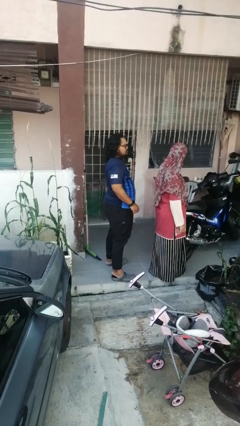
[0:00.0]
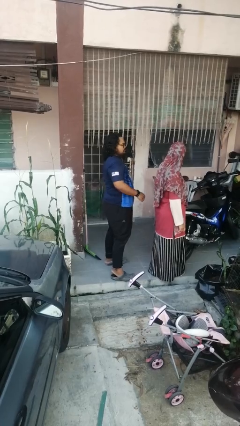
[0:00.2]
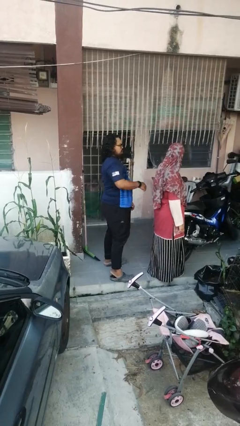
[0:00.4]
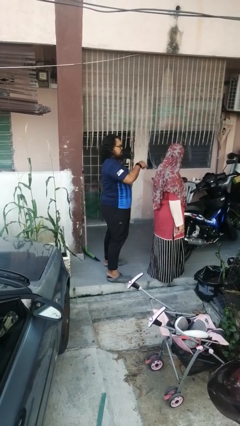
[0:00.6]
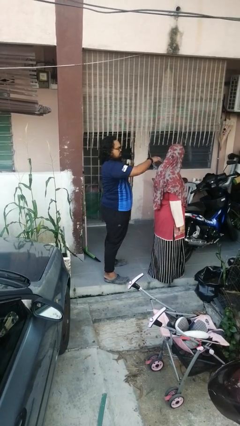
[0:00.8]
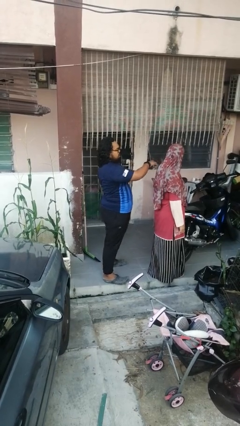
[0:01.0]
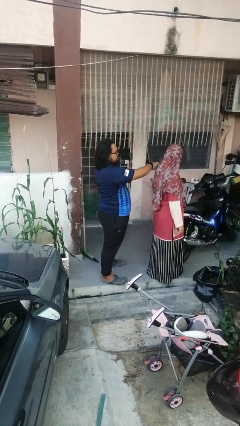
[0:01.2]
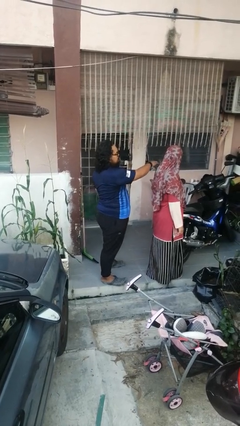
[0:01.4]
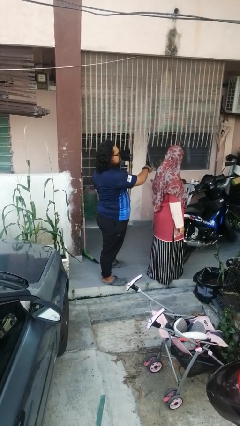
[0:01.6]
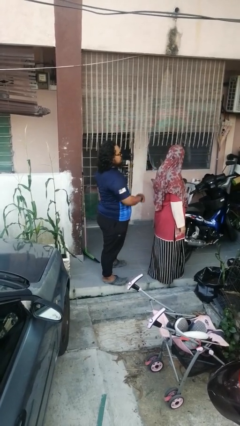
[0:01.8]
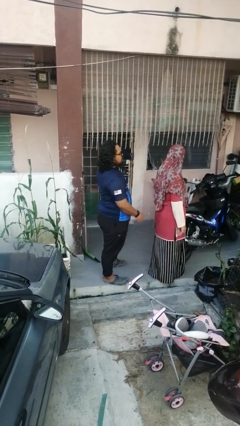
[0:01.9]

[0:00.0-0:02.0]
person touches back of person

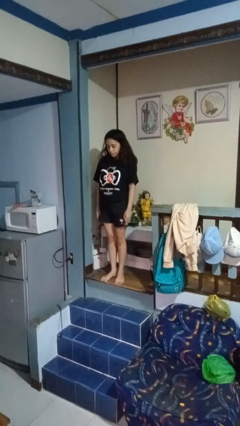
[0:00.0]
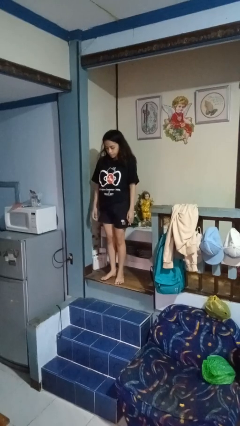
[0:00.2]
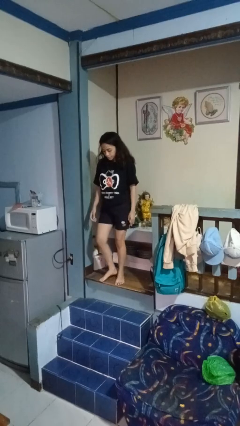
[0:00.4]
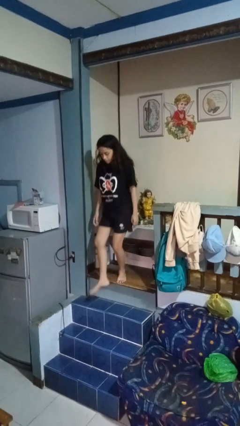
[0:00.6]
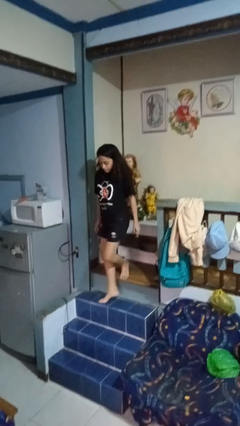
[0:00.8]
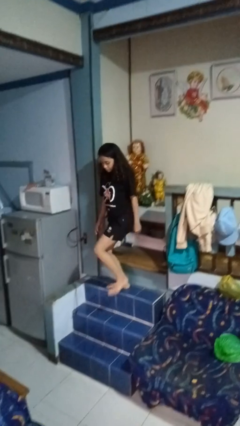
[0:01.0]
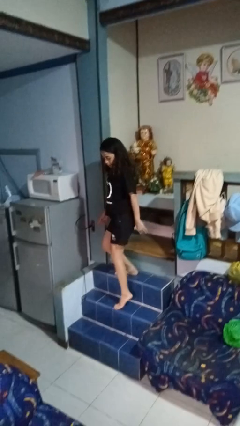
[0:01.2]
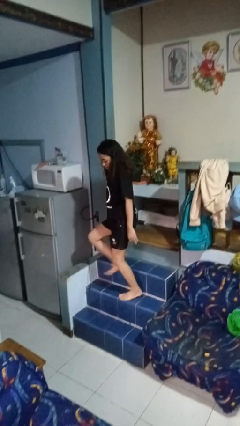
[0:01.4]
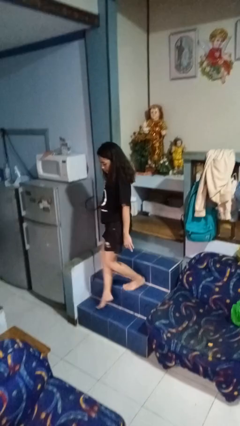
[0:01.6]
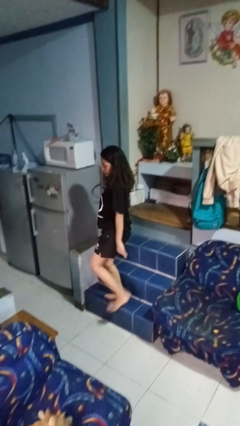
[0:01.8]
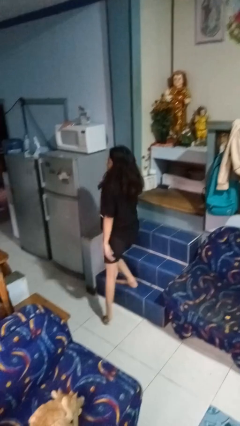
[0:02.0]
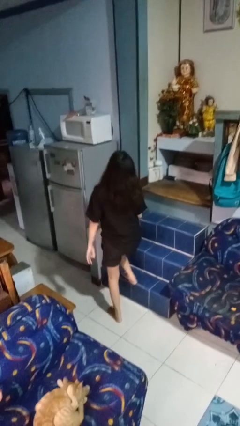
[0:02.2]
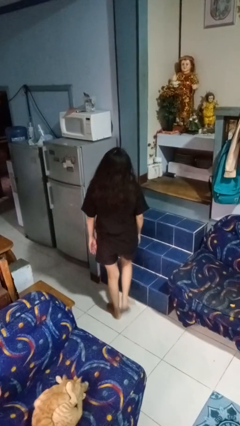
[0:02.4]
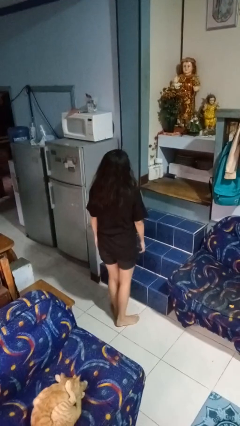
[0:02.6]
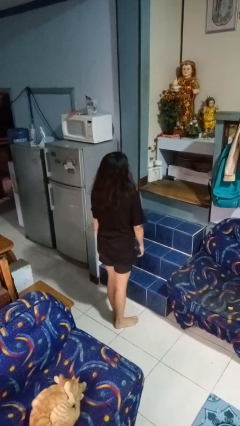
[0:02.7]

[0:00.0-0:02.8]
person climbs down stairs

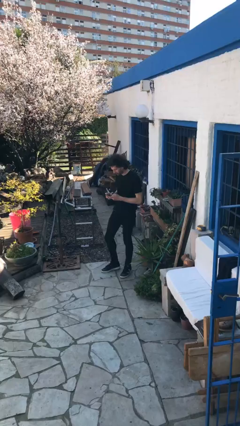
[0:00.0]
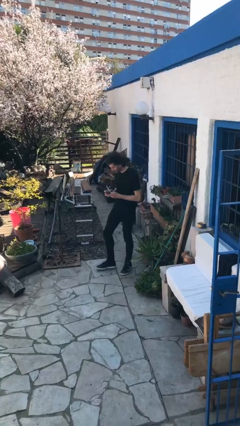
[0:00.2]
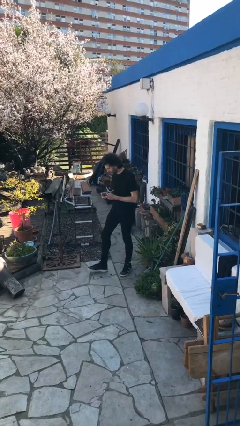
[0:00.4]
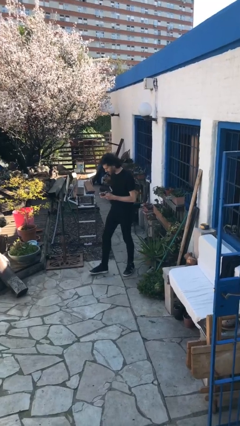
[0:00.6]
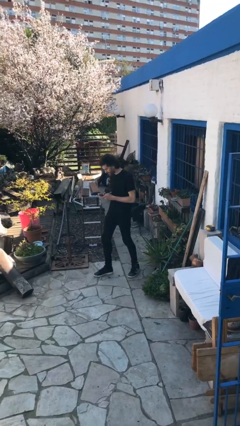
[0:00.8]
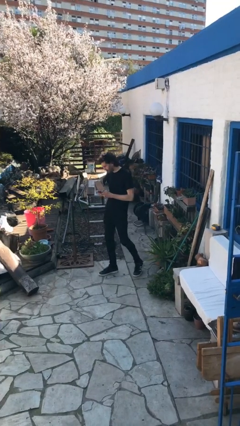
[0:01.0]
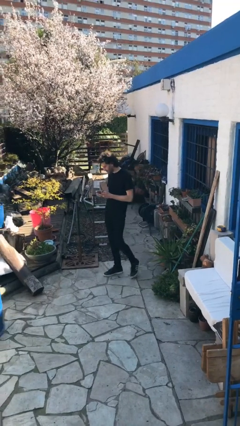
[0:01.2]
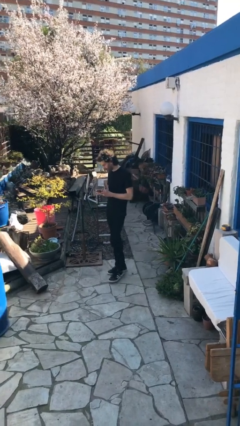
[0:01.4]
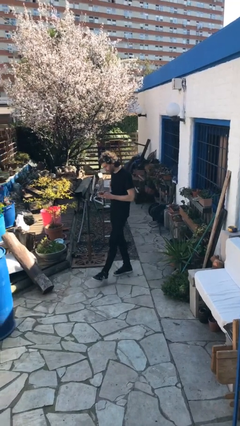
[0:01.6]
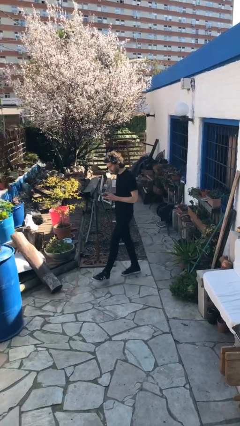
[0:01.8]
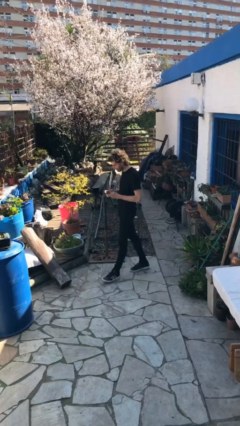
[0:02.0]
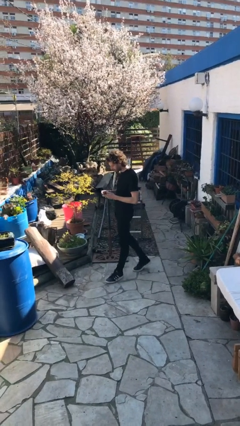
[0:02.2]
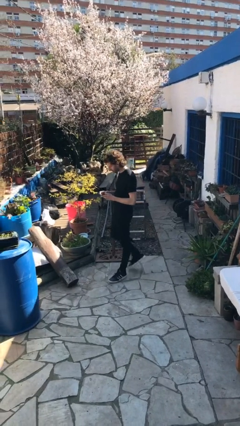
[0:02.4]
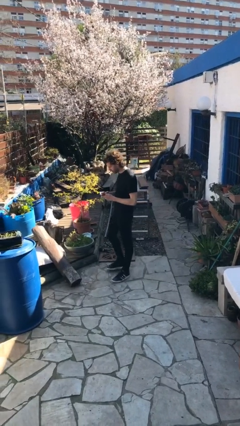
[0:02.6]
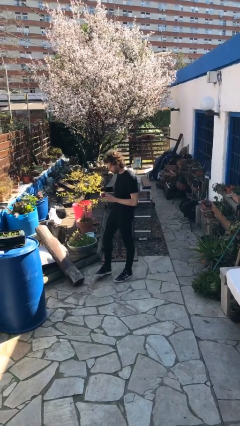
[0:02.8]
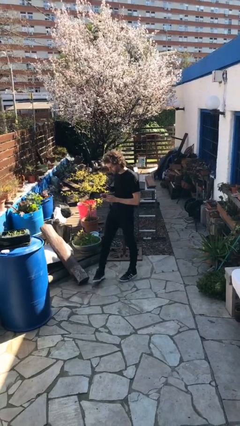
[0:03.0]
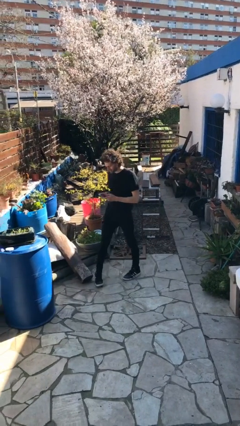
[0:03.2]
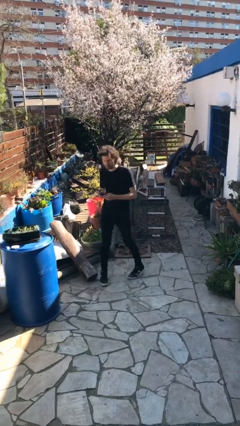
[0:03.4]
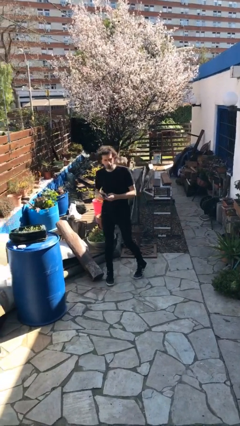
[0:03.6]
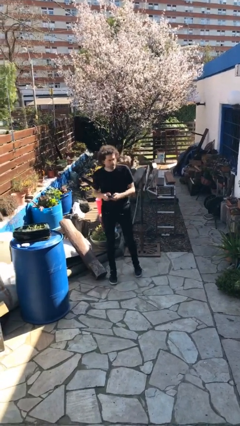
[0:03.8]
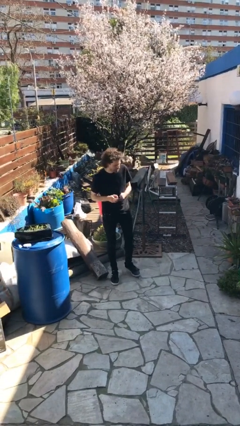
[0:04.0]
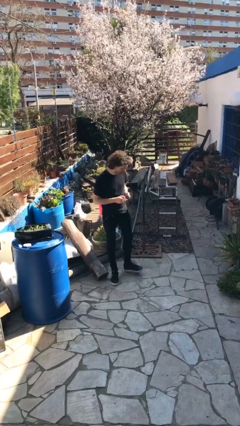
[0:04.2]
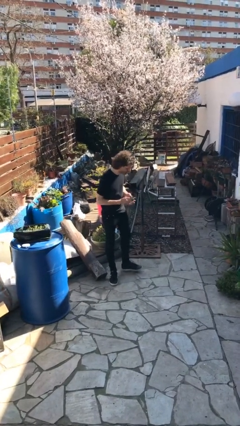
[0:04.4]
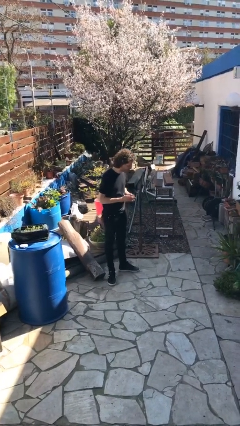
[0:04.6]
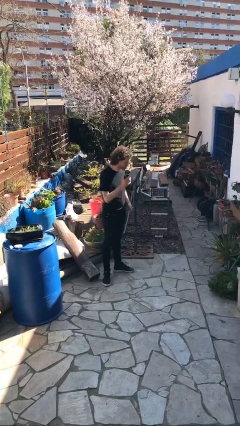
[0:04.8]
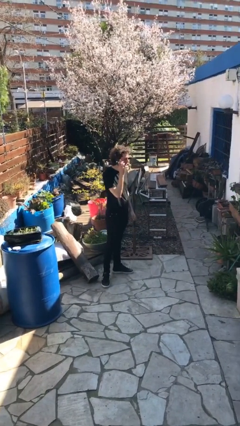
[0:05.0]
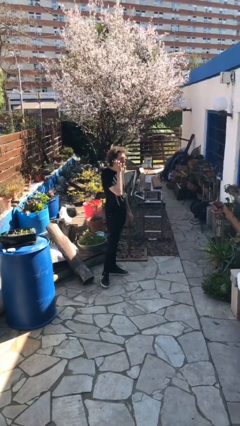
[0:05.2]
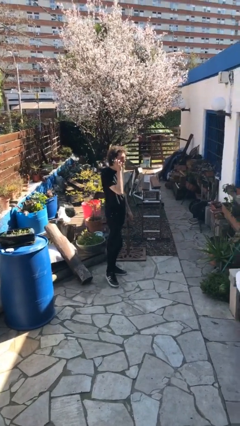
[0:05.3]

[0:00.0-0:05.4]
person texts on phone

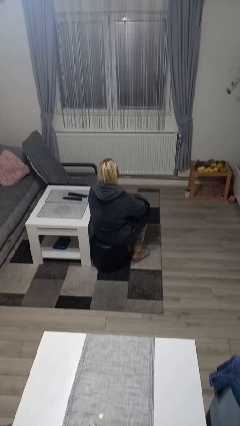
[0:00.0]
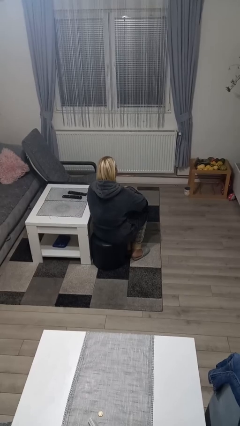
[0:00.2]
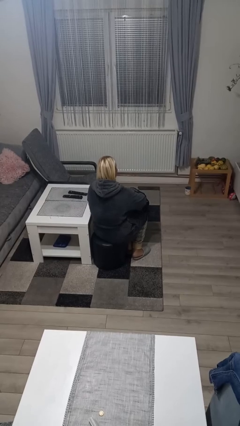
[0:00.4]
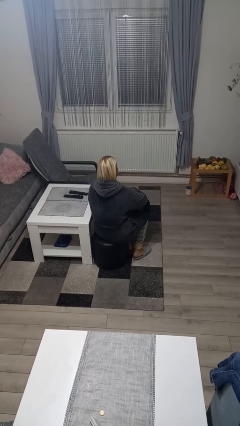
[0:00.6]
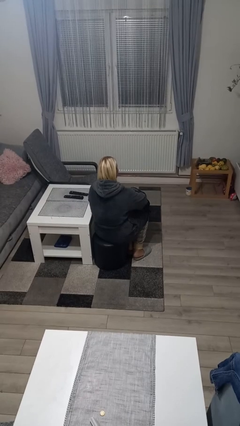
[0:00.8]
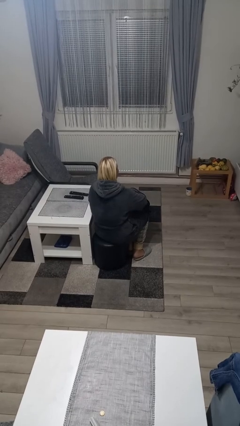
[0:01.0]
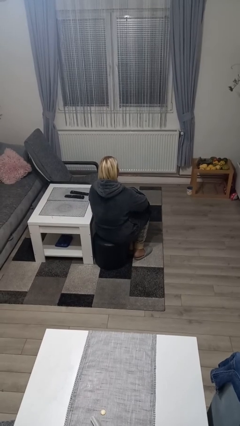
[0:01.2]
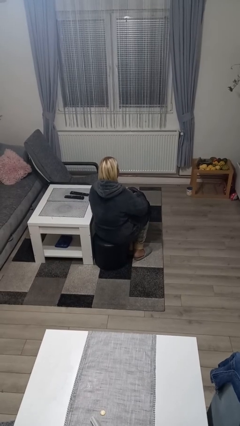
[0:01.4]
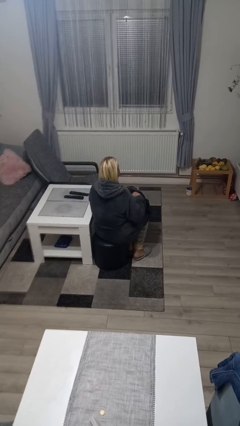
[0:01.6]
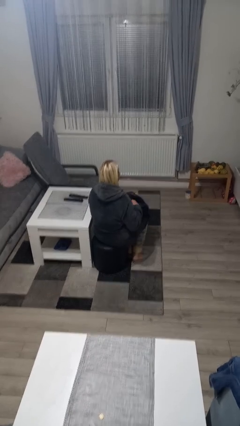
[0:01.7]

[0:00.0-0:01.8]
person searches in bag

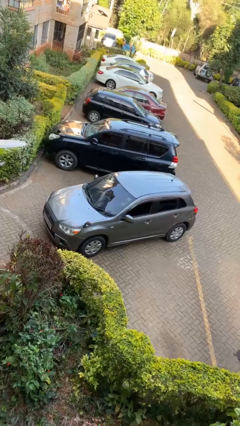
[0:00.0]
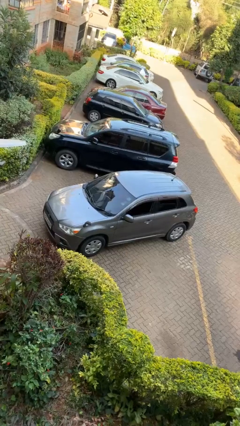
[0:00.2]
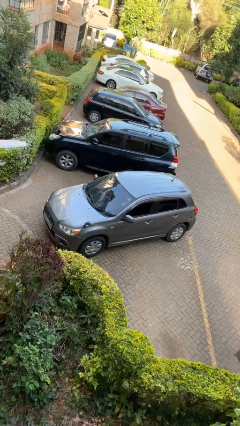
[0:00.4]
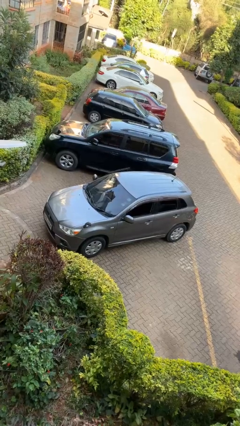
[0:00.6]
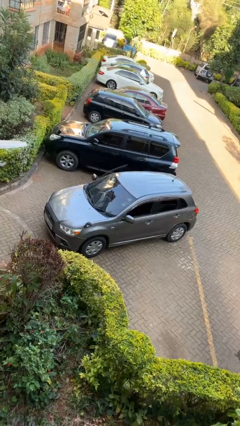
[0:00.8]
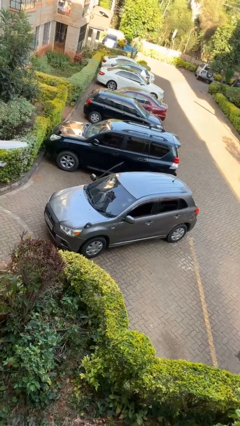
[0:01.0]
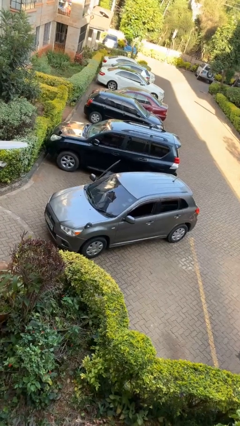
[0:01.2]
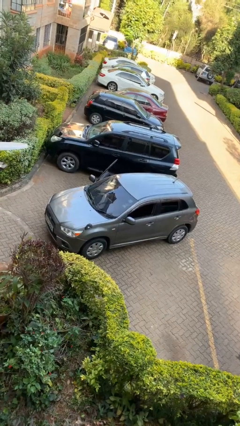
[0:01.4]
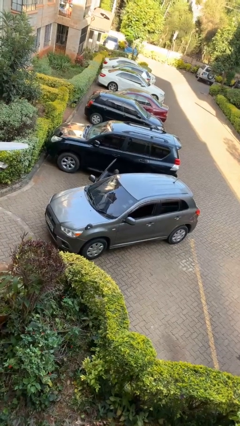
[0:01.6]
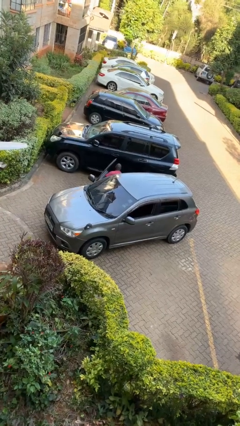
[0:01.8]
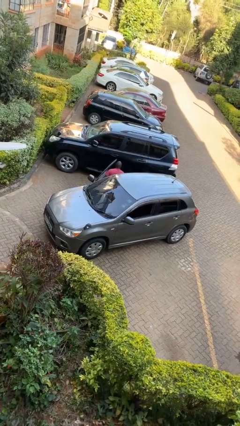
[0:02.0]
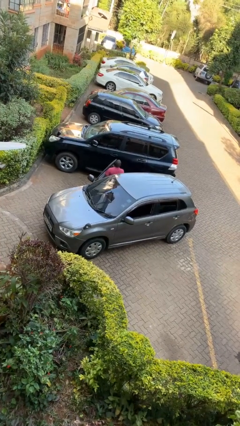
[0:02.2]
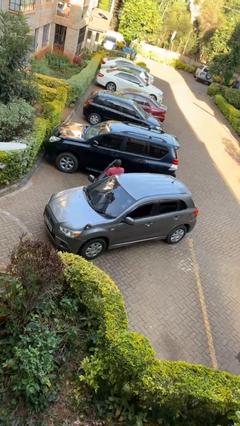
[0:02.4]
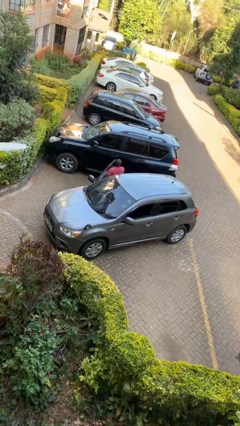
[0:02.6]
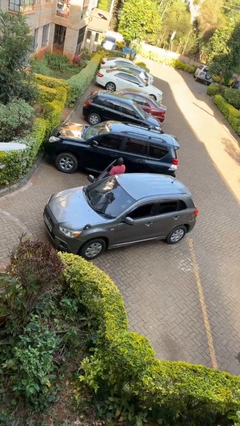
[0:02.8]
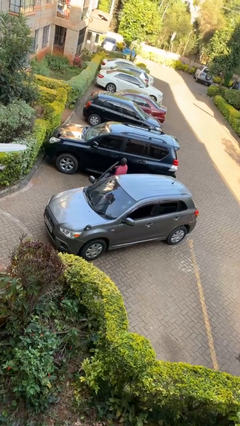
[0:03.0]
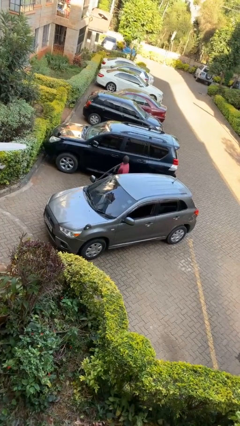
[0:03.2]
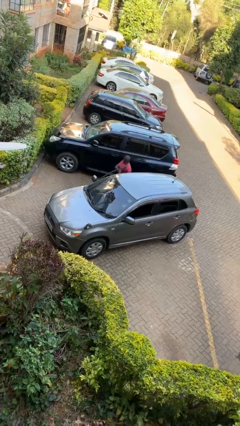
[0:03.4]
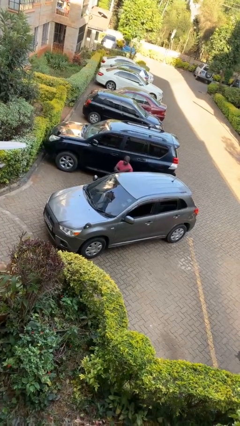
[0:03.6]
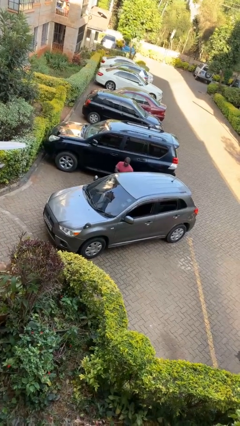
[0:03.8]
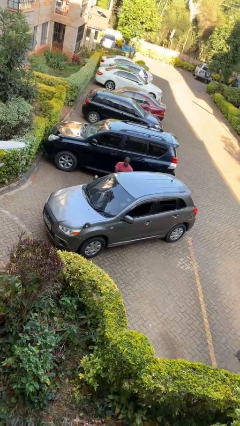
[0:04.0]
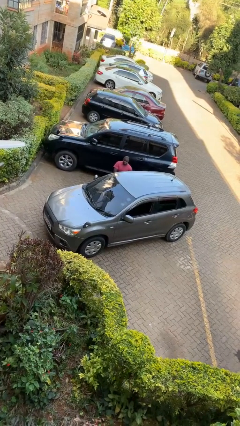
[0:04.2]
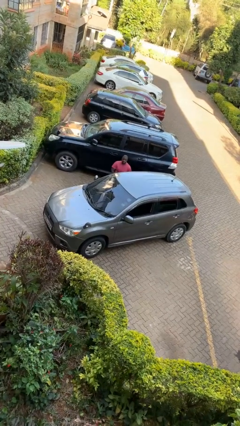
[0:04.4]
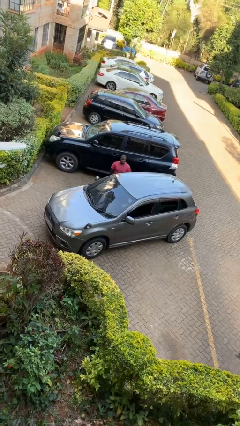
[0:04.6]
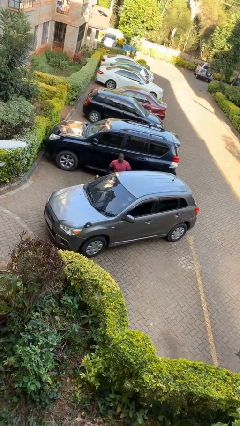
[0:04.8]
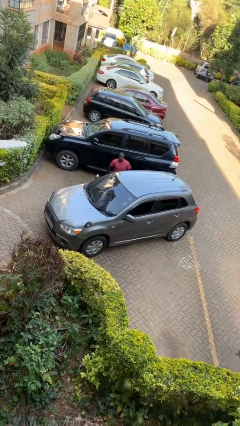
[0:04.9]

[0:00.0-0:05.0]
car drops off person

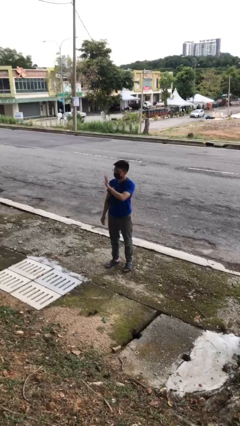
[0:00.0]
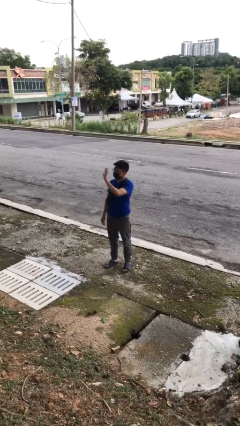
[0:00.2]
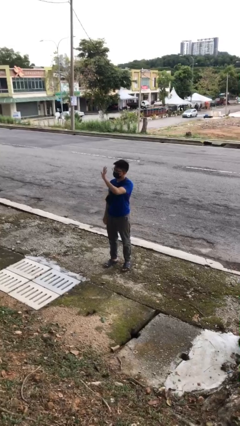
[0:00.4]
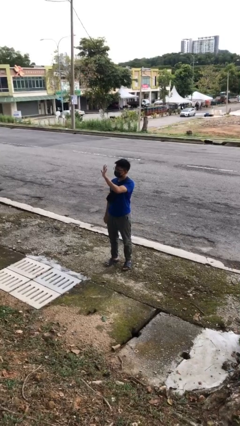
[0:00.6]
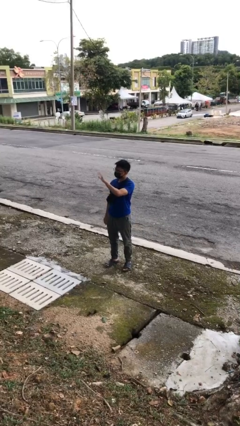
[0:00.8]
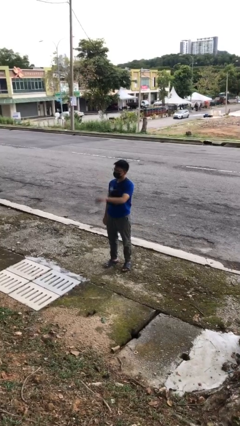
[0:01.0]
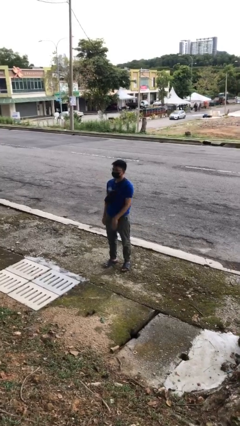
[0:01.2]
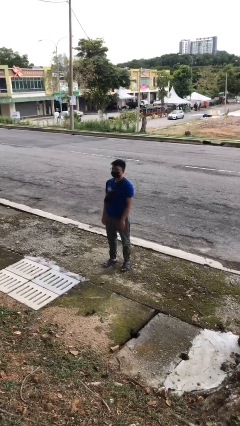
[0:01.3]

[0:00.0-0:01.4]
person gestures stop
